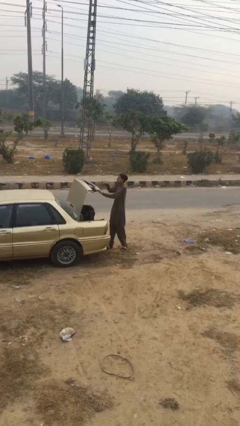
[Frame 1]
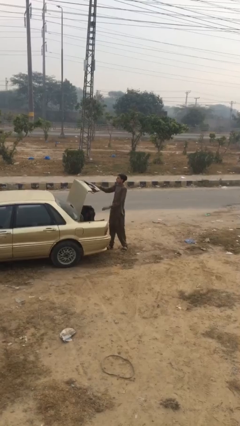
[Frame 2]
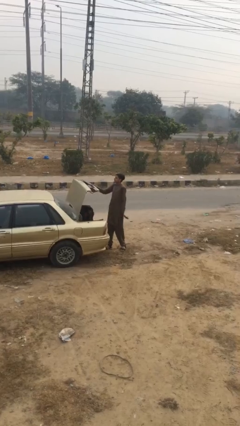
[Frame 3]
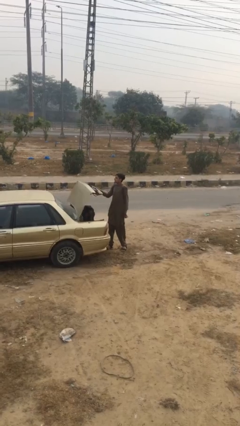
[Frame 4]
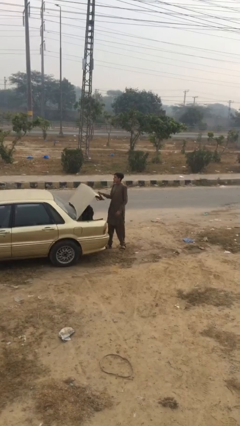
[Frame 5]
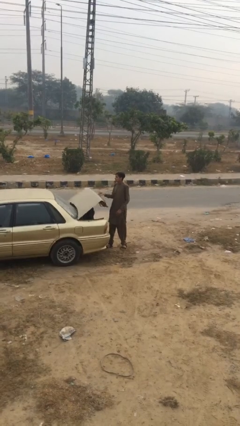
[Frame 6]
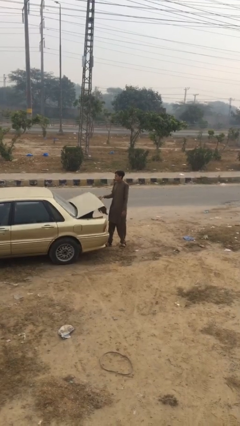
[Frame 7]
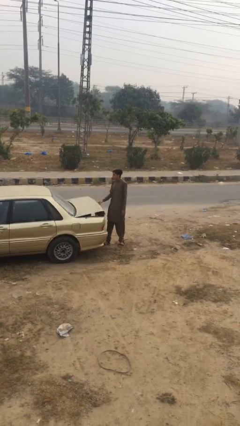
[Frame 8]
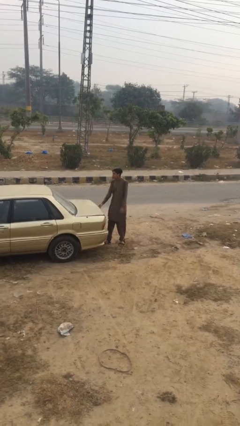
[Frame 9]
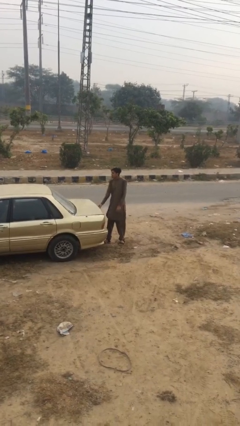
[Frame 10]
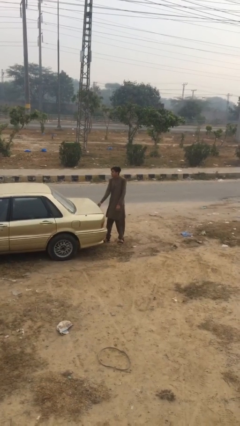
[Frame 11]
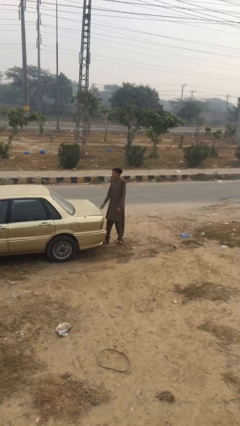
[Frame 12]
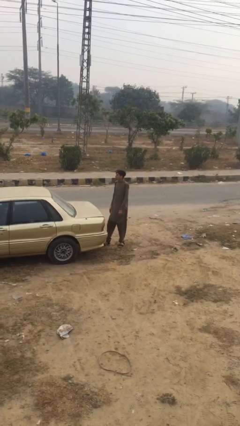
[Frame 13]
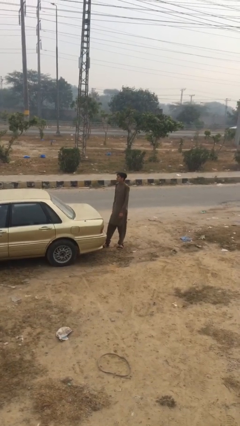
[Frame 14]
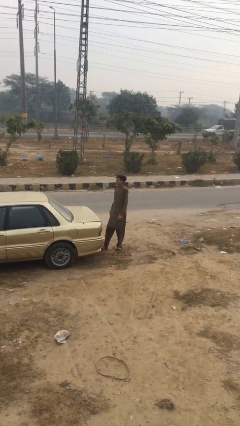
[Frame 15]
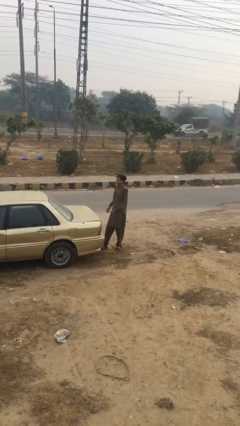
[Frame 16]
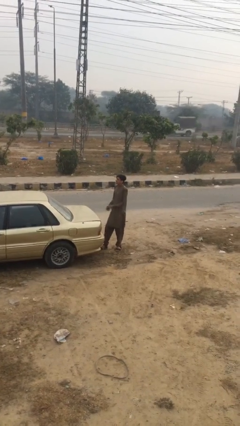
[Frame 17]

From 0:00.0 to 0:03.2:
person closes car trunk

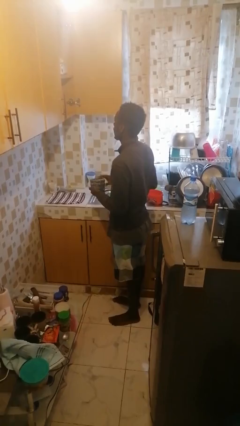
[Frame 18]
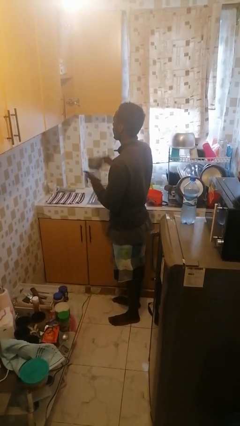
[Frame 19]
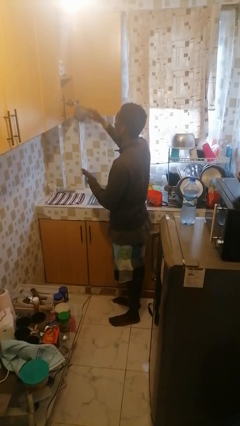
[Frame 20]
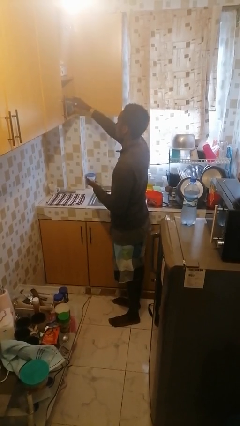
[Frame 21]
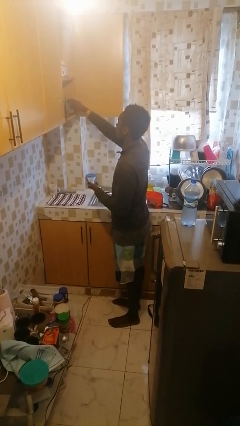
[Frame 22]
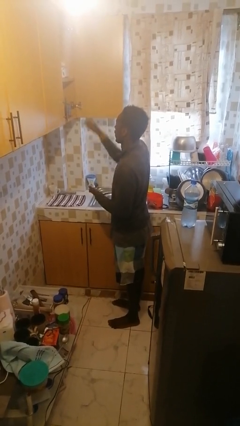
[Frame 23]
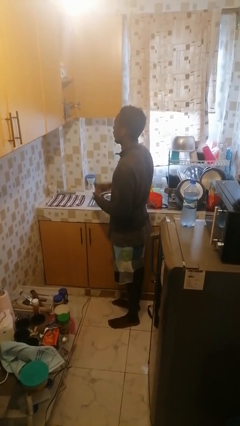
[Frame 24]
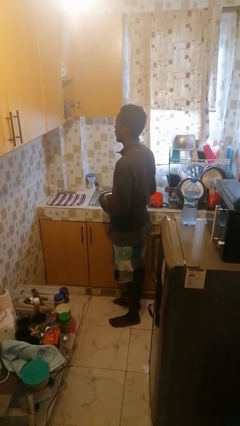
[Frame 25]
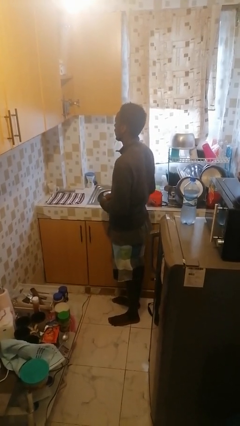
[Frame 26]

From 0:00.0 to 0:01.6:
person puts down object into cabinet

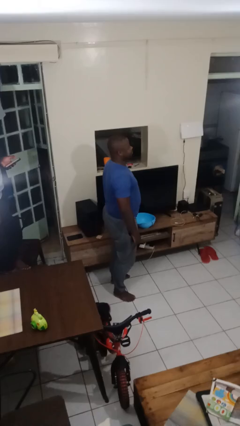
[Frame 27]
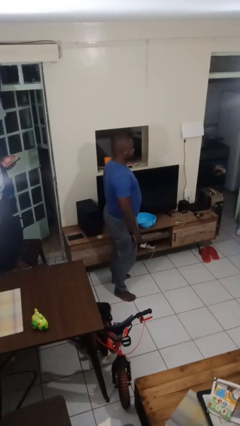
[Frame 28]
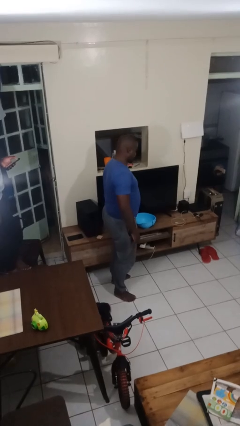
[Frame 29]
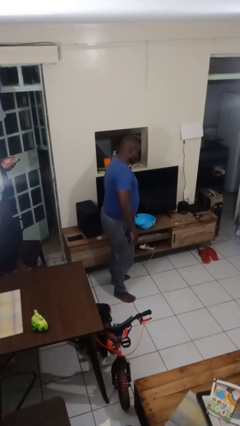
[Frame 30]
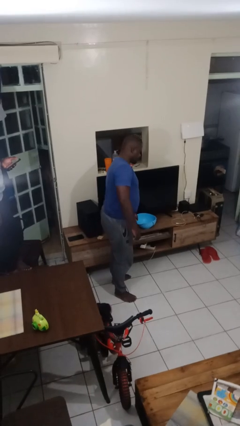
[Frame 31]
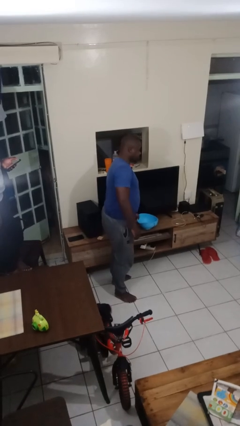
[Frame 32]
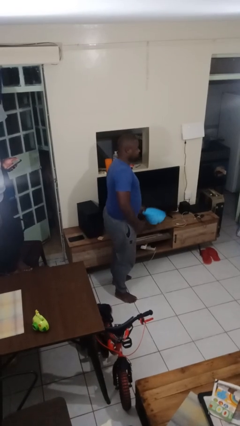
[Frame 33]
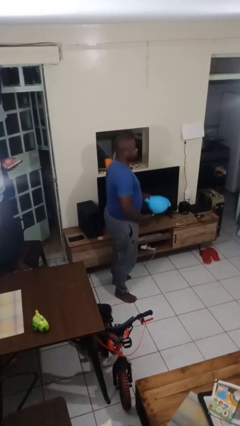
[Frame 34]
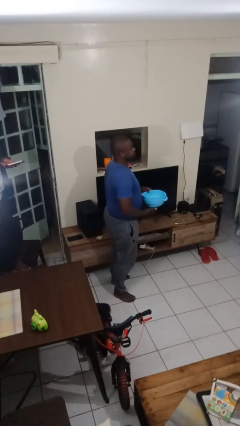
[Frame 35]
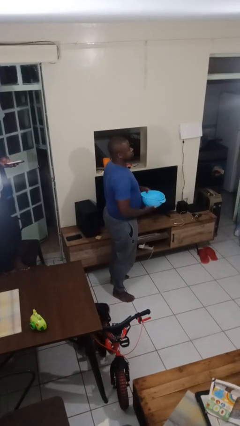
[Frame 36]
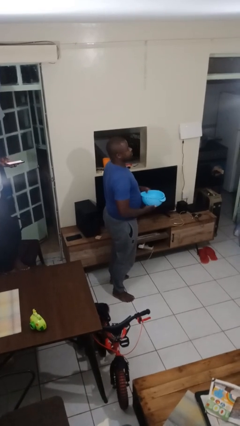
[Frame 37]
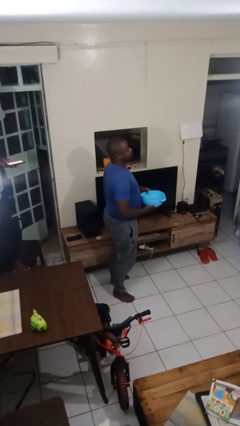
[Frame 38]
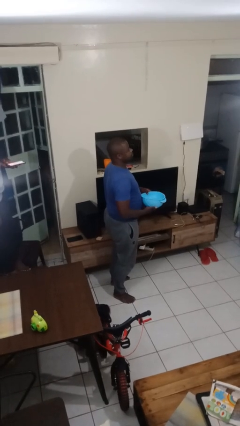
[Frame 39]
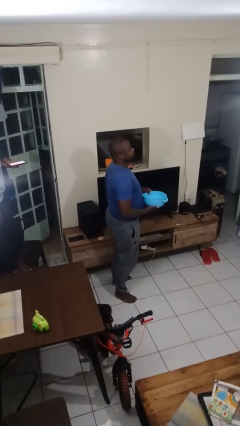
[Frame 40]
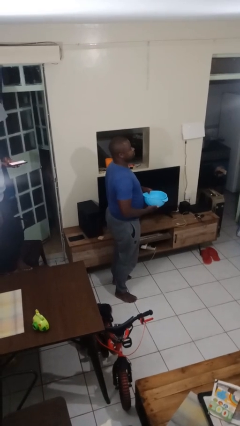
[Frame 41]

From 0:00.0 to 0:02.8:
person picks up object from countertop

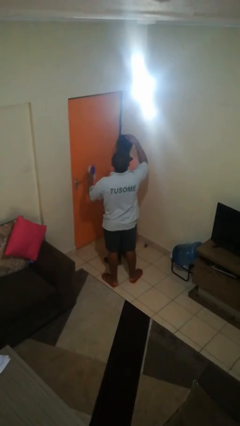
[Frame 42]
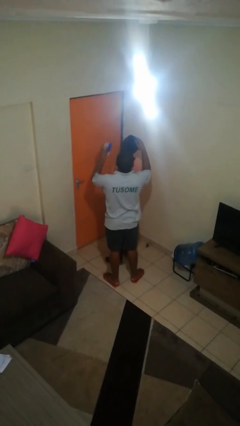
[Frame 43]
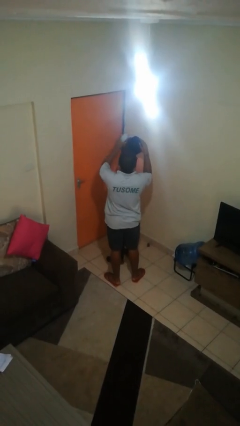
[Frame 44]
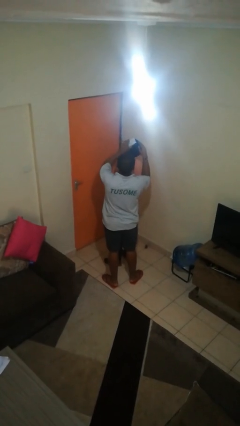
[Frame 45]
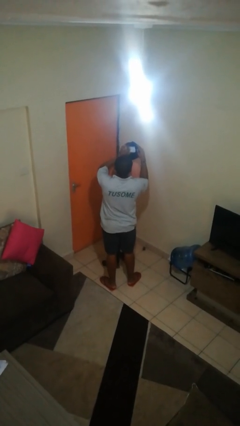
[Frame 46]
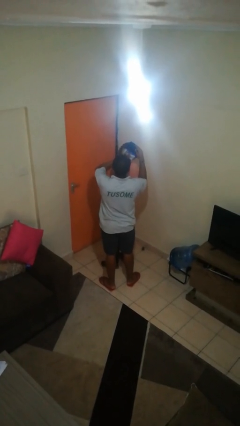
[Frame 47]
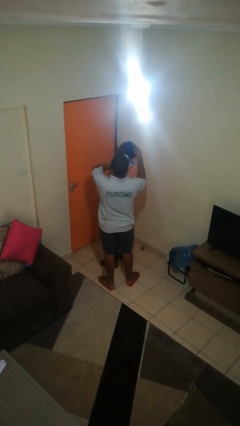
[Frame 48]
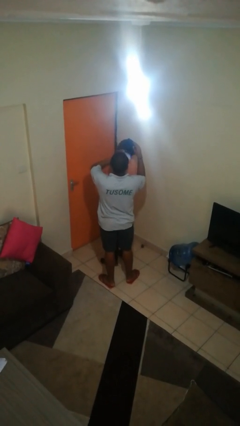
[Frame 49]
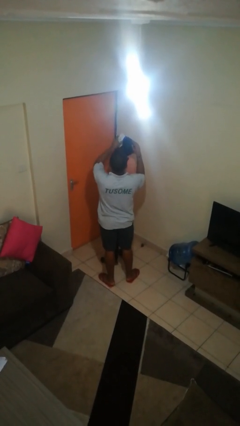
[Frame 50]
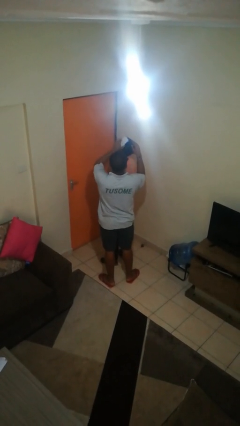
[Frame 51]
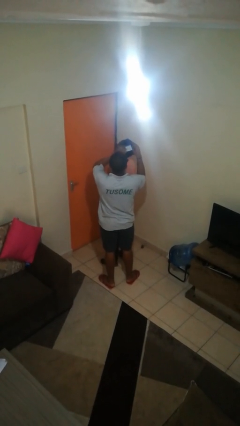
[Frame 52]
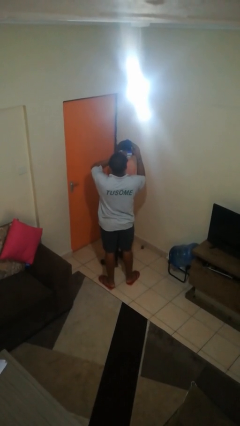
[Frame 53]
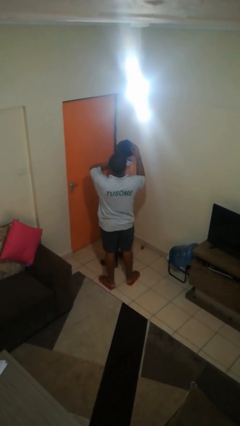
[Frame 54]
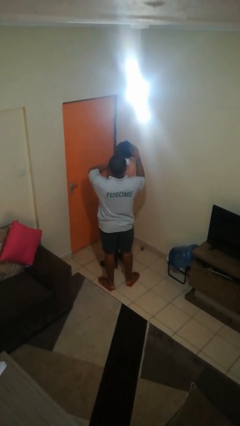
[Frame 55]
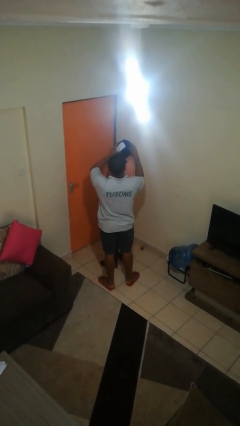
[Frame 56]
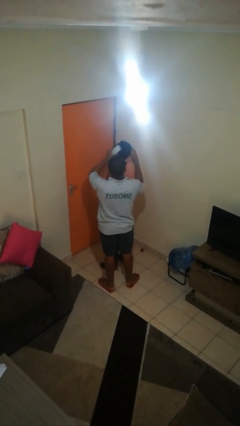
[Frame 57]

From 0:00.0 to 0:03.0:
person brushes hair of person

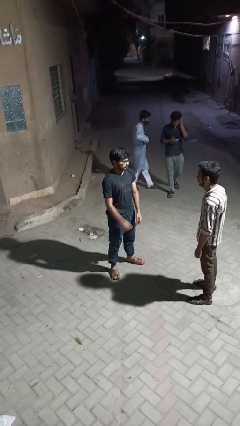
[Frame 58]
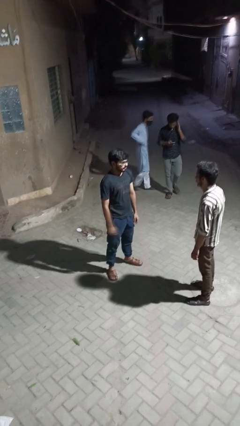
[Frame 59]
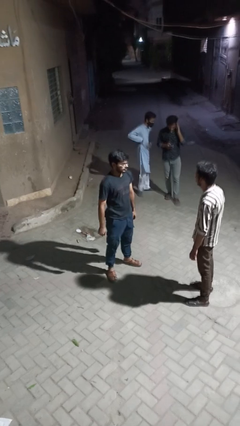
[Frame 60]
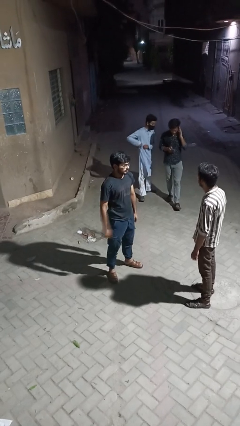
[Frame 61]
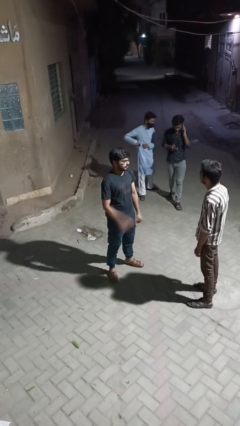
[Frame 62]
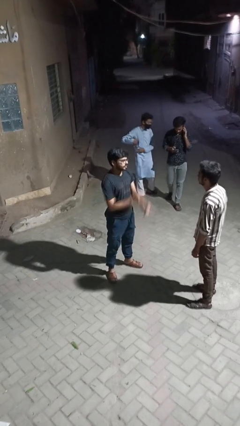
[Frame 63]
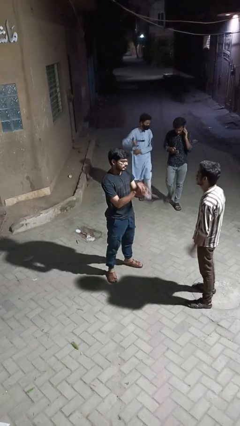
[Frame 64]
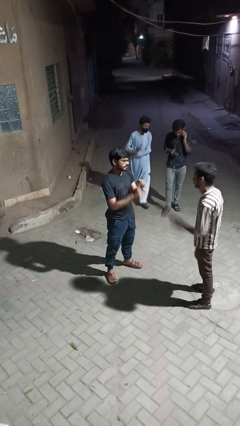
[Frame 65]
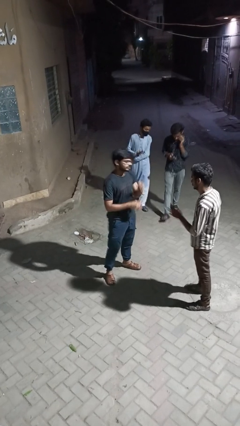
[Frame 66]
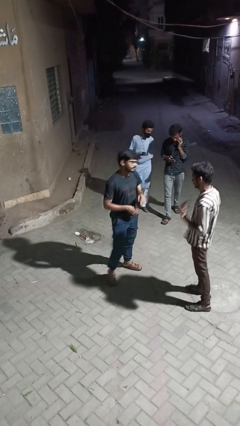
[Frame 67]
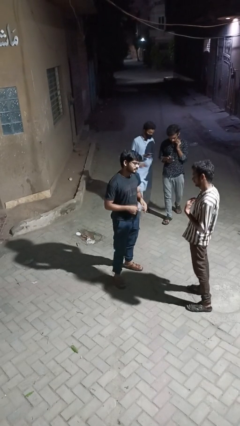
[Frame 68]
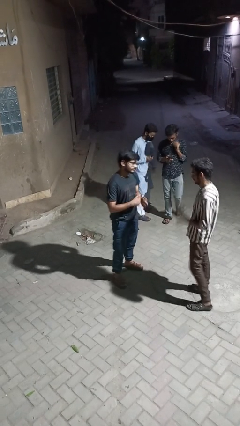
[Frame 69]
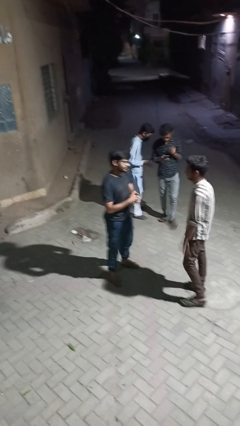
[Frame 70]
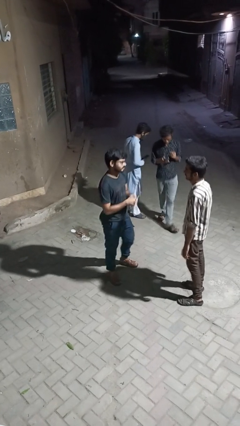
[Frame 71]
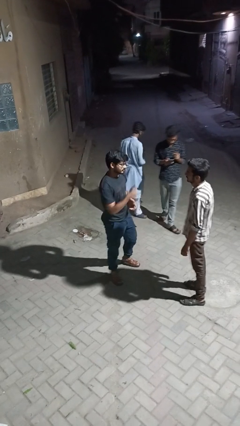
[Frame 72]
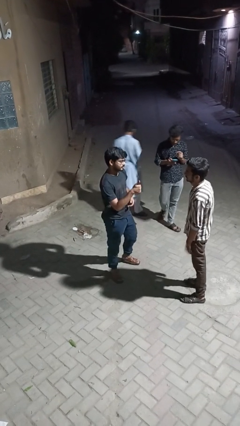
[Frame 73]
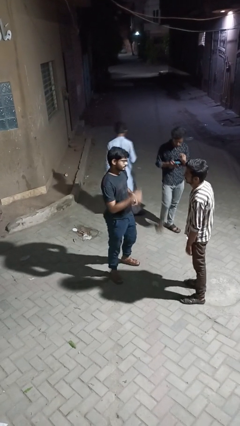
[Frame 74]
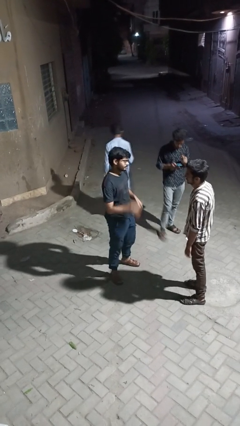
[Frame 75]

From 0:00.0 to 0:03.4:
person talks to person

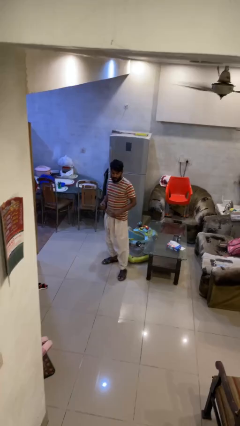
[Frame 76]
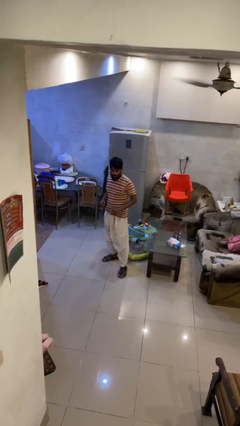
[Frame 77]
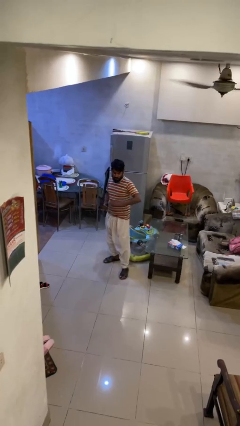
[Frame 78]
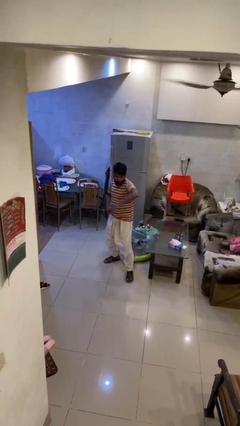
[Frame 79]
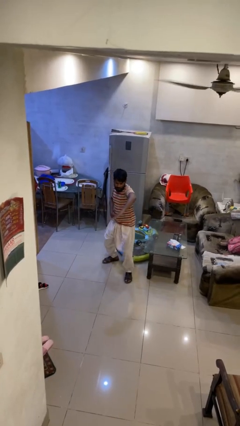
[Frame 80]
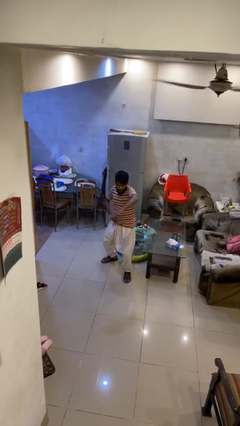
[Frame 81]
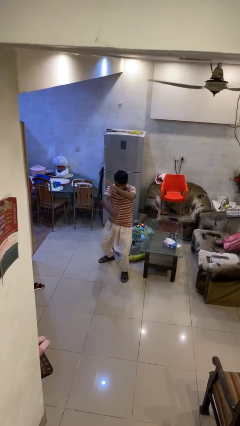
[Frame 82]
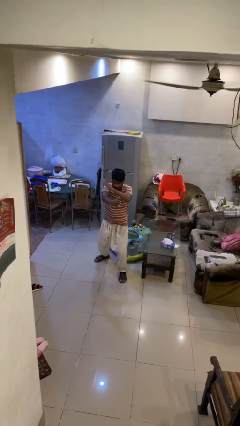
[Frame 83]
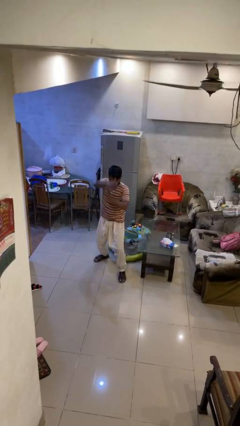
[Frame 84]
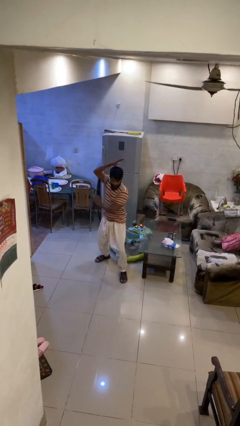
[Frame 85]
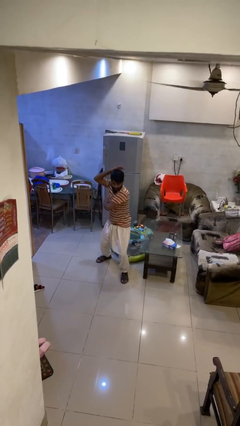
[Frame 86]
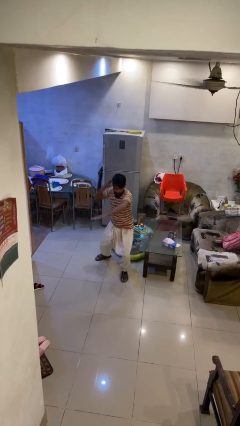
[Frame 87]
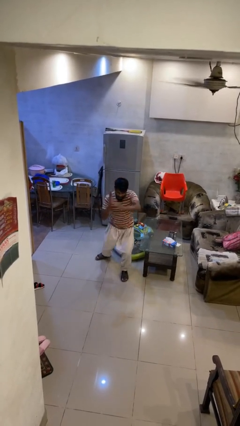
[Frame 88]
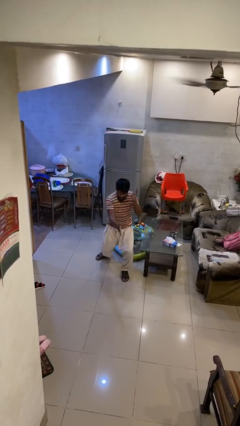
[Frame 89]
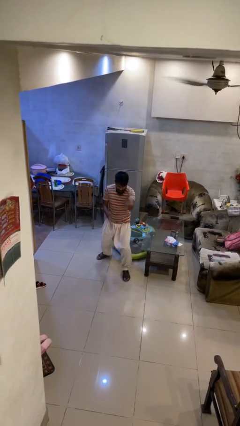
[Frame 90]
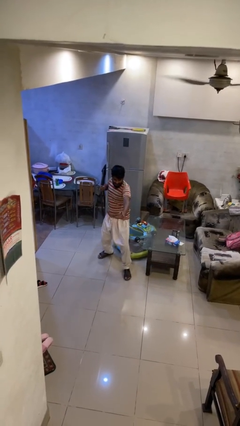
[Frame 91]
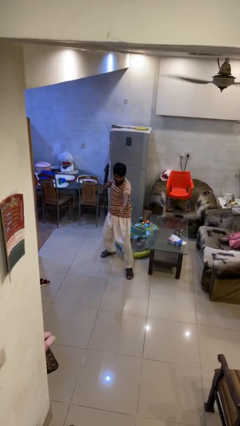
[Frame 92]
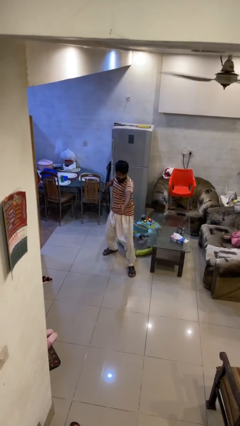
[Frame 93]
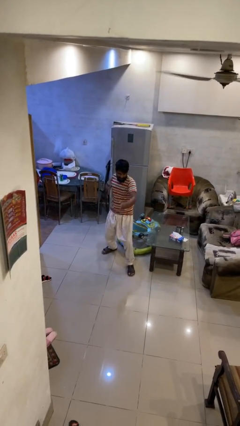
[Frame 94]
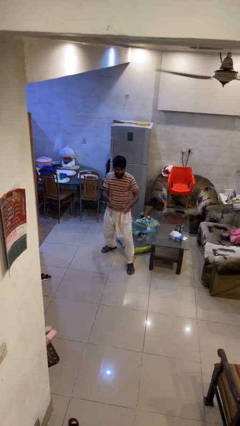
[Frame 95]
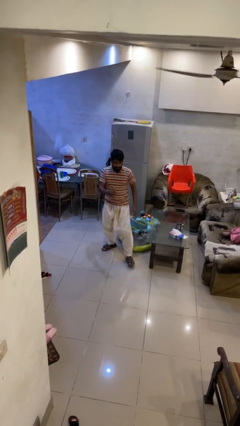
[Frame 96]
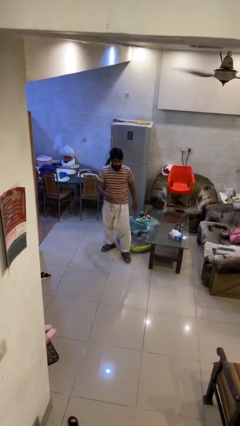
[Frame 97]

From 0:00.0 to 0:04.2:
person karate chop
